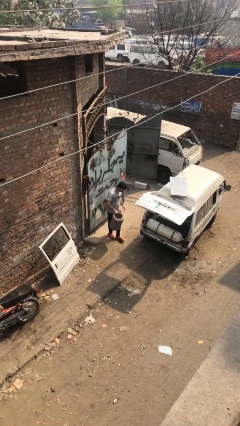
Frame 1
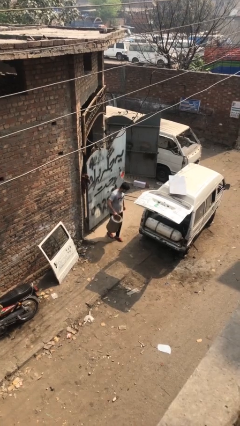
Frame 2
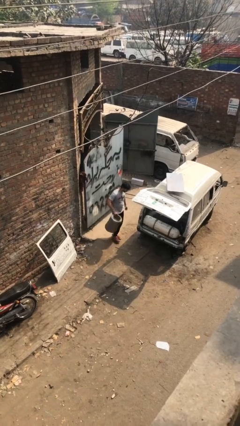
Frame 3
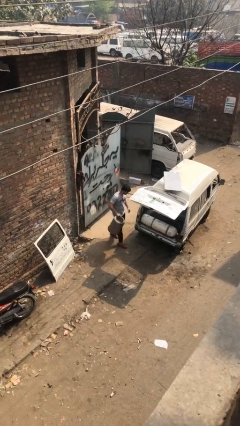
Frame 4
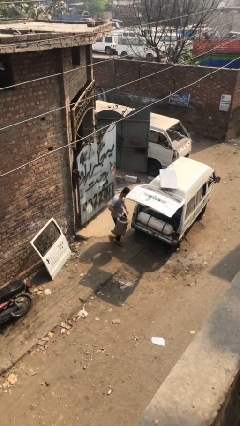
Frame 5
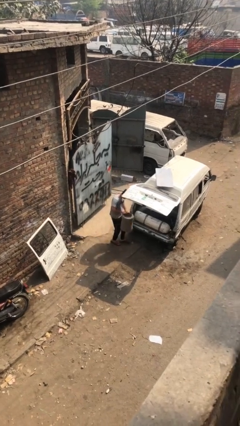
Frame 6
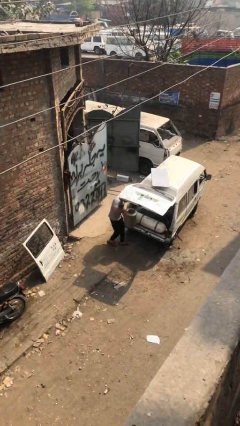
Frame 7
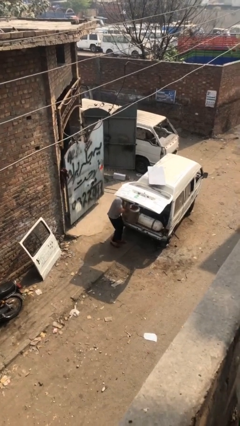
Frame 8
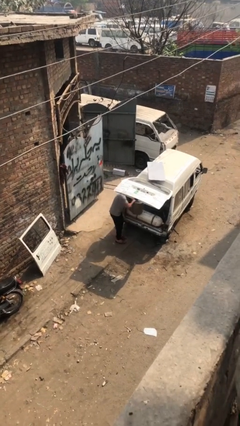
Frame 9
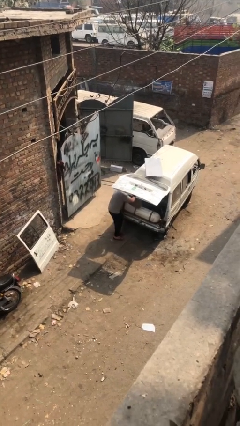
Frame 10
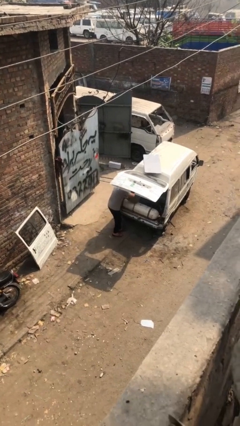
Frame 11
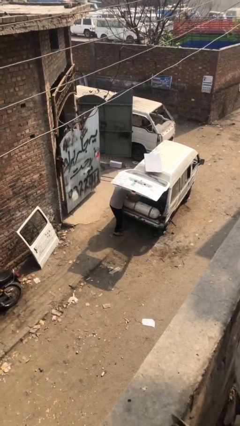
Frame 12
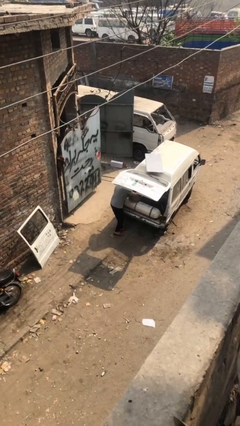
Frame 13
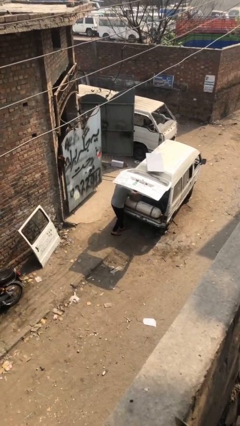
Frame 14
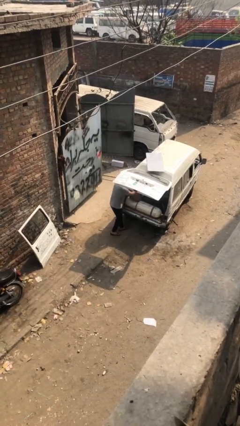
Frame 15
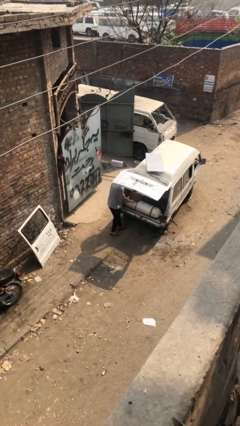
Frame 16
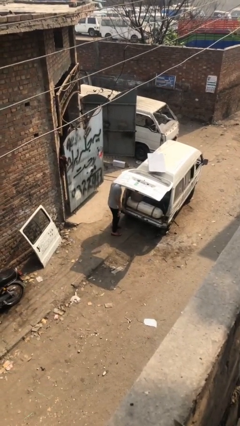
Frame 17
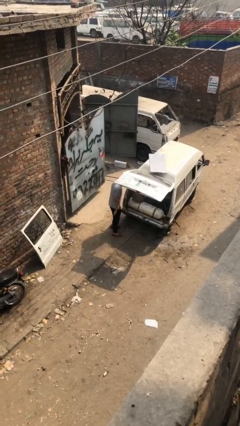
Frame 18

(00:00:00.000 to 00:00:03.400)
person loads car

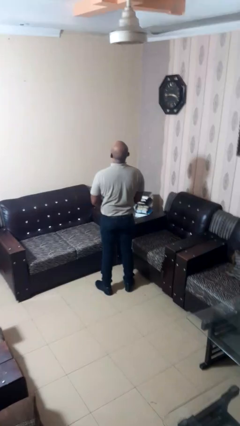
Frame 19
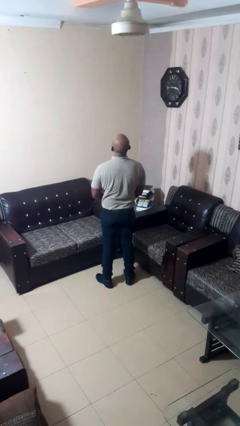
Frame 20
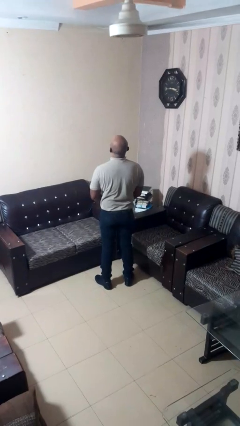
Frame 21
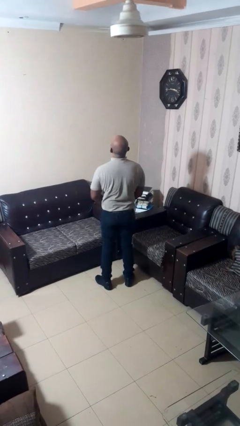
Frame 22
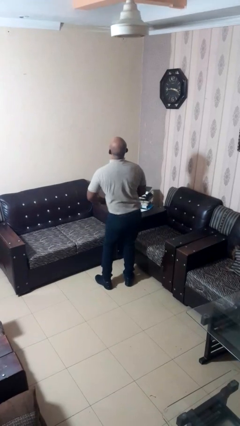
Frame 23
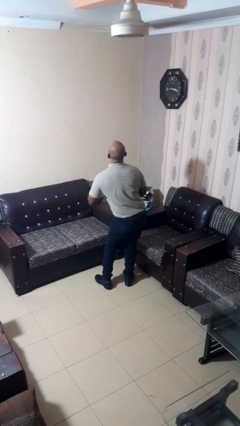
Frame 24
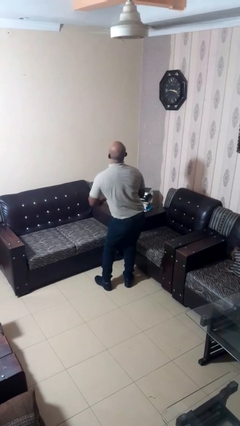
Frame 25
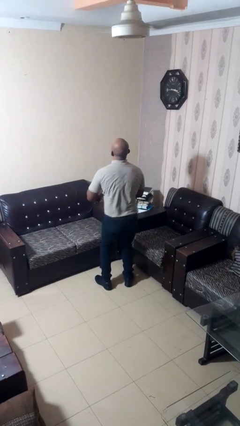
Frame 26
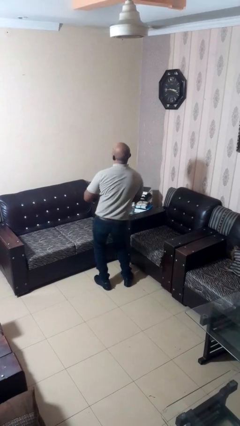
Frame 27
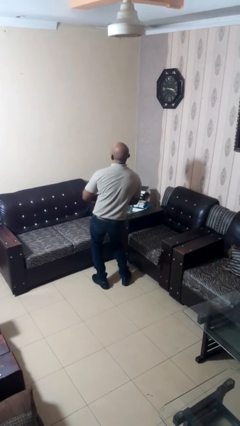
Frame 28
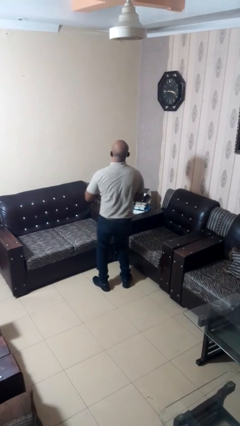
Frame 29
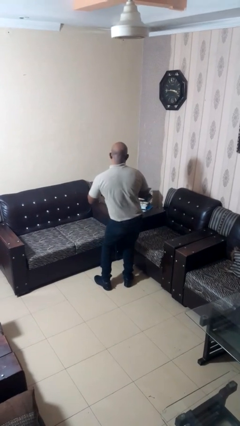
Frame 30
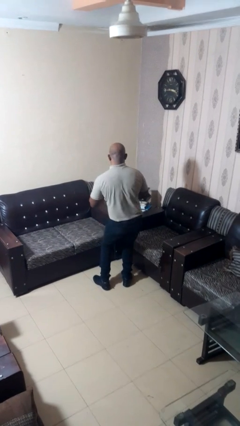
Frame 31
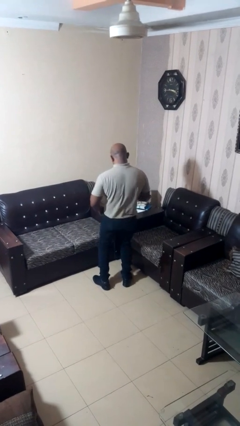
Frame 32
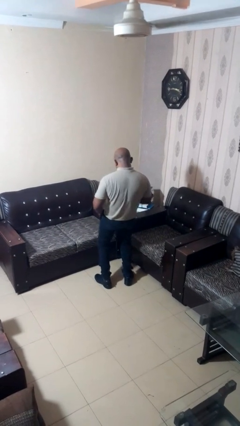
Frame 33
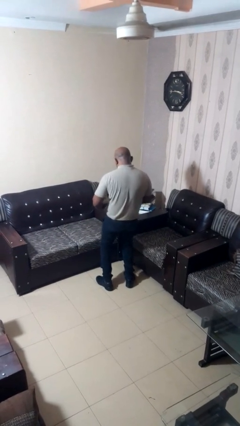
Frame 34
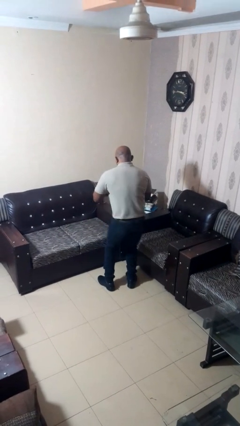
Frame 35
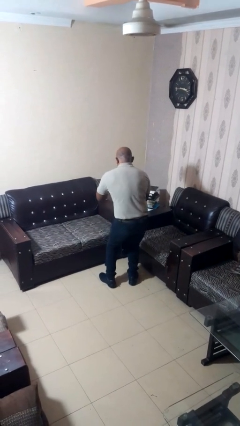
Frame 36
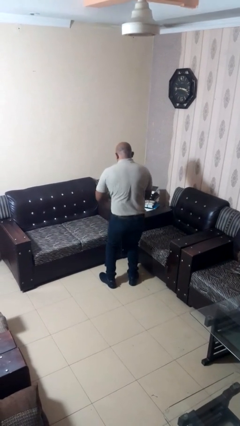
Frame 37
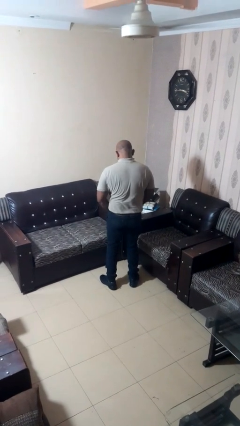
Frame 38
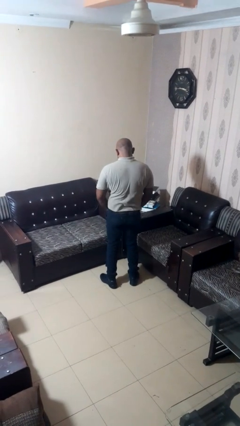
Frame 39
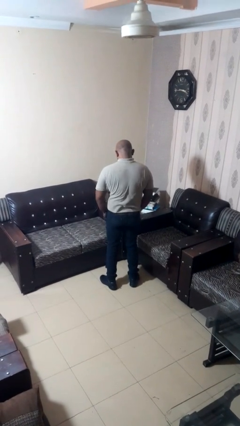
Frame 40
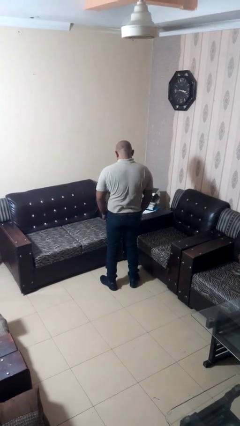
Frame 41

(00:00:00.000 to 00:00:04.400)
person wiggles hips

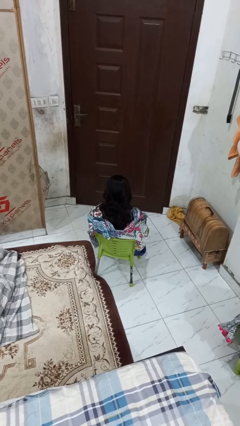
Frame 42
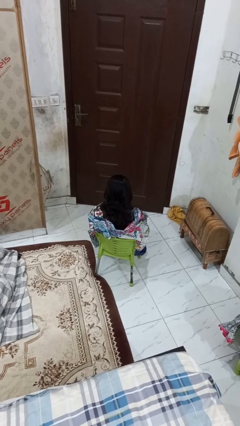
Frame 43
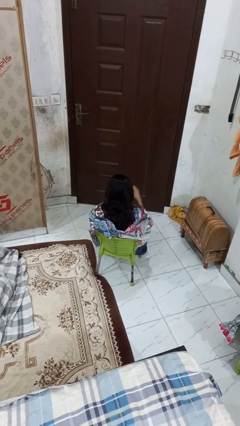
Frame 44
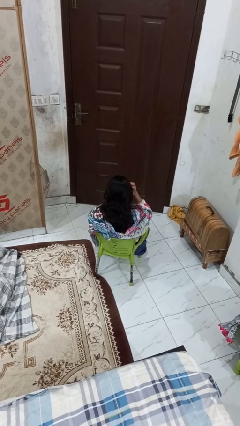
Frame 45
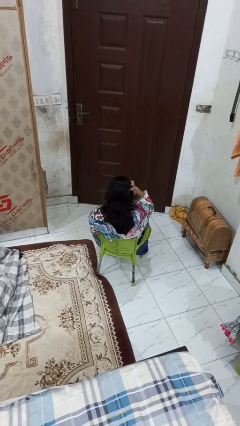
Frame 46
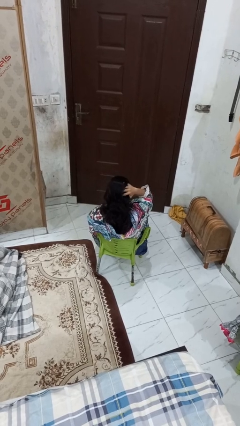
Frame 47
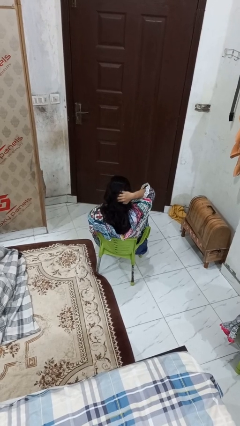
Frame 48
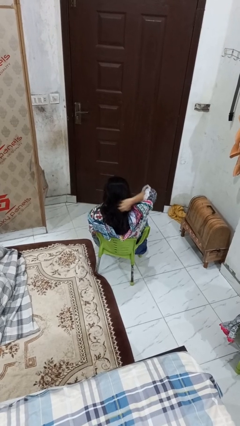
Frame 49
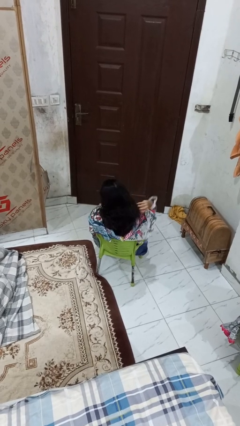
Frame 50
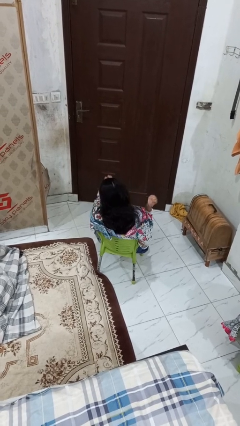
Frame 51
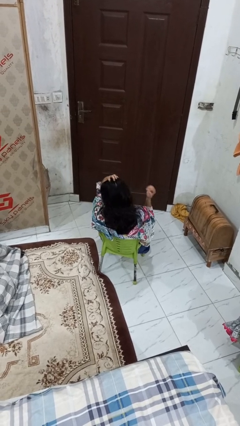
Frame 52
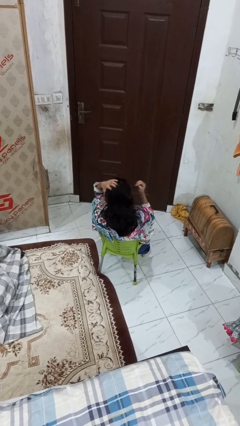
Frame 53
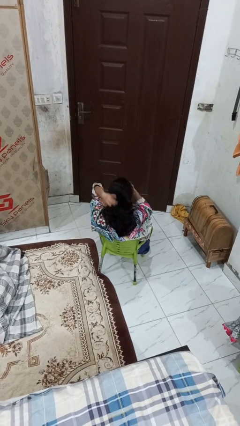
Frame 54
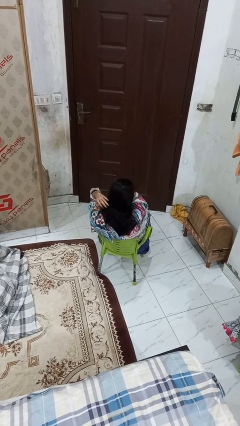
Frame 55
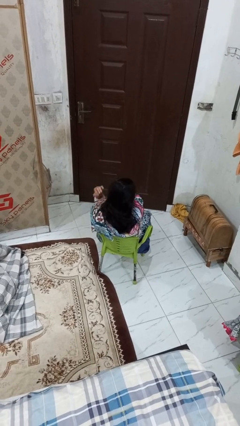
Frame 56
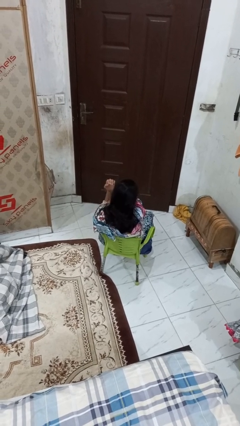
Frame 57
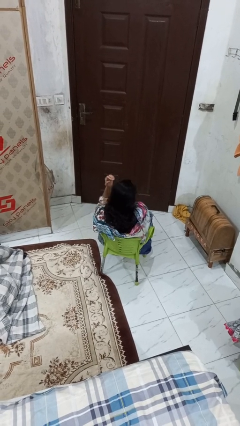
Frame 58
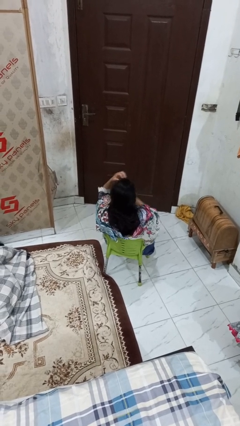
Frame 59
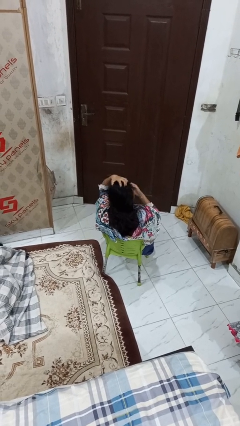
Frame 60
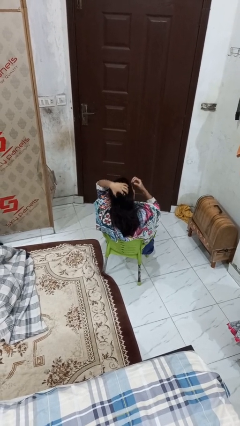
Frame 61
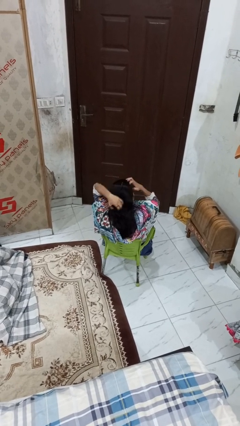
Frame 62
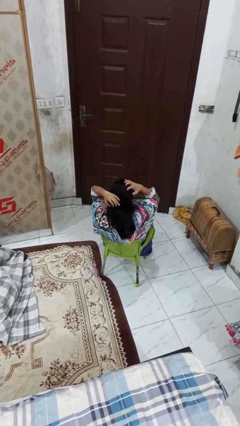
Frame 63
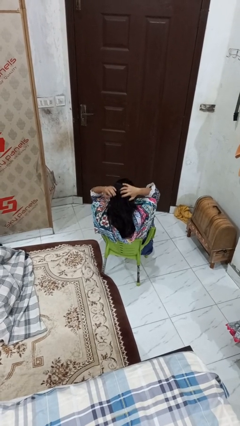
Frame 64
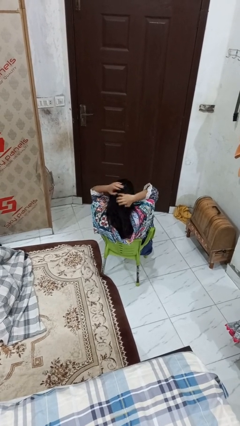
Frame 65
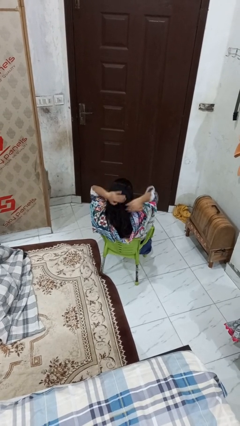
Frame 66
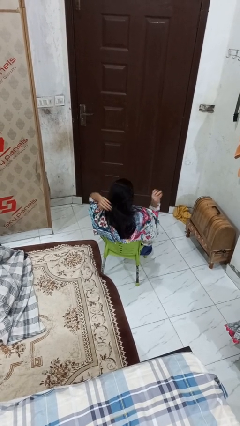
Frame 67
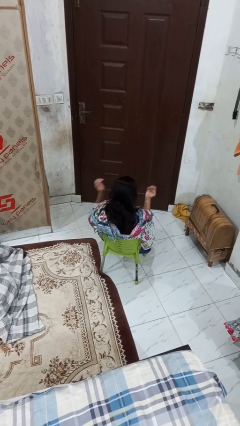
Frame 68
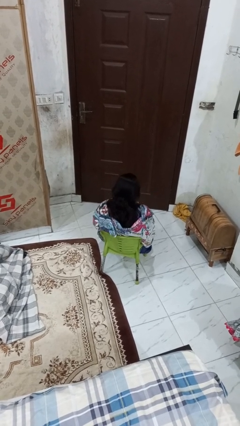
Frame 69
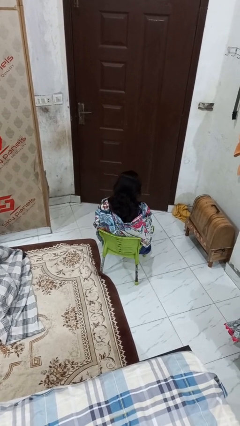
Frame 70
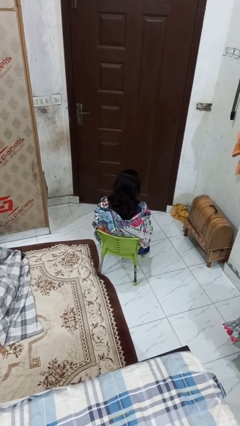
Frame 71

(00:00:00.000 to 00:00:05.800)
person strokes hair

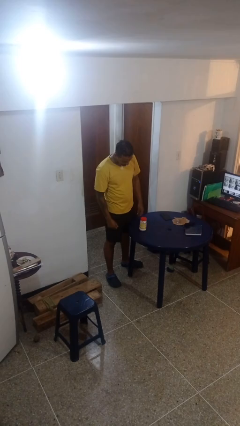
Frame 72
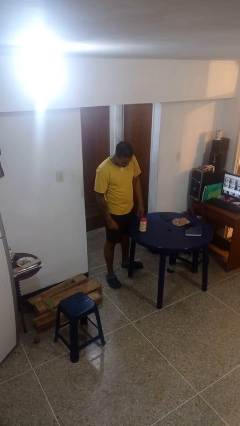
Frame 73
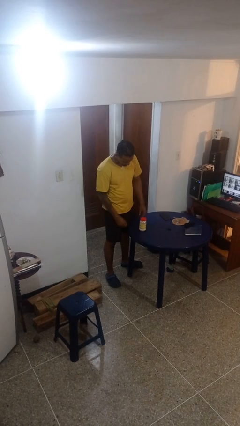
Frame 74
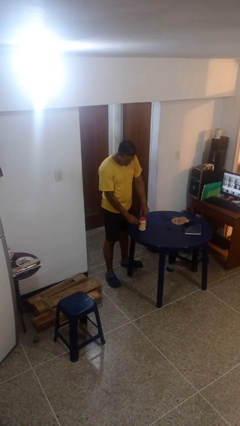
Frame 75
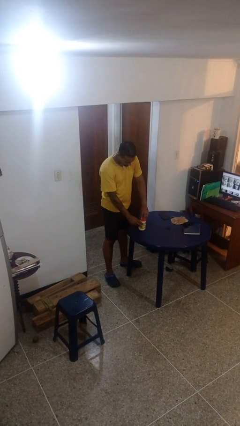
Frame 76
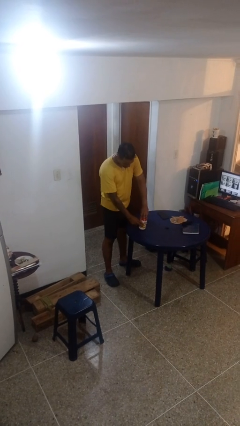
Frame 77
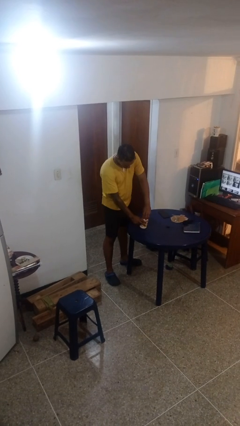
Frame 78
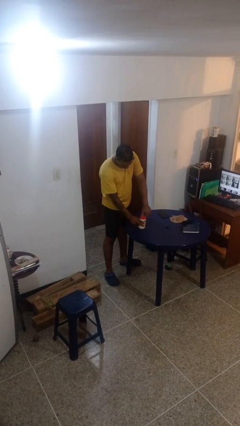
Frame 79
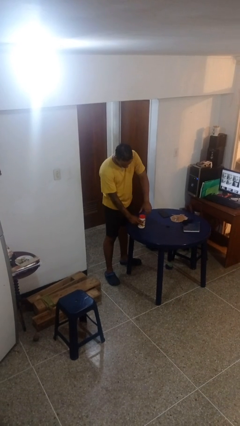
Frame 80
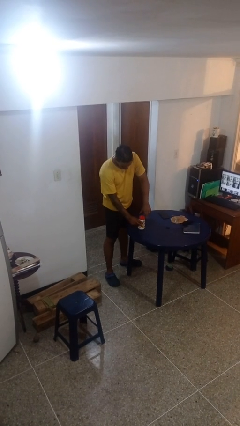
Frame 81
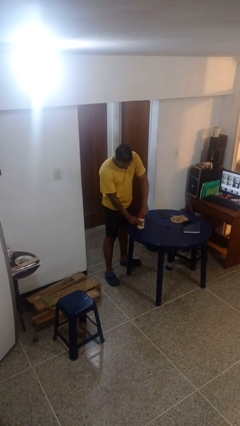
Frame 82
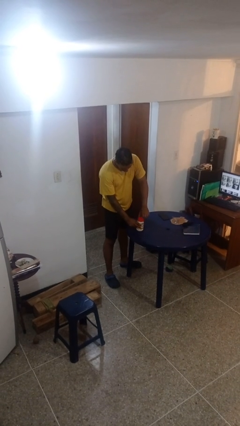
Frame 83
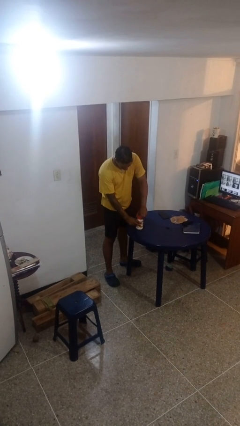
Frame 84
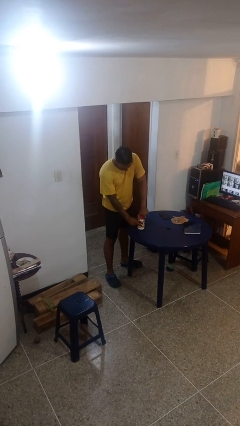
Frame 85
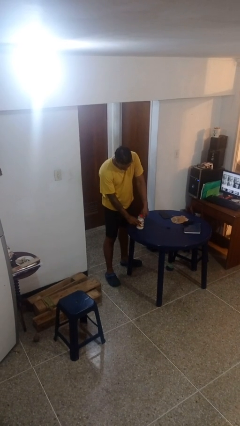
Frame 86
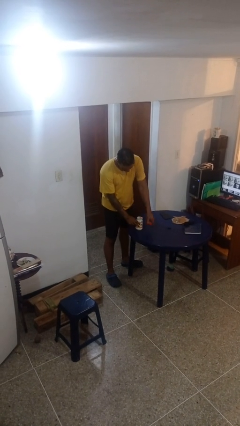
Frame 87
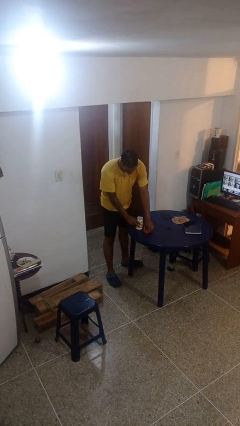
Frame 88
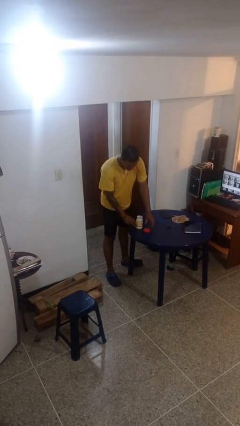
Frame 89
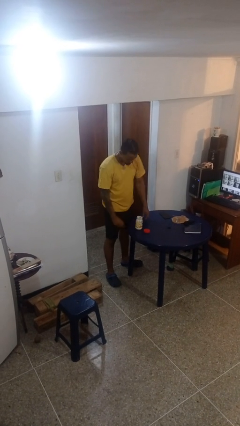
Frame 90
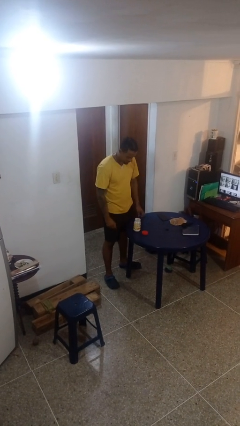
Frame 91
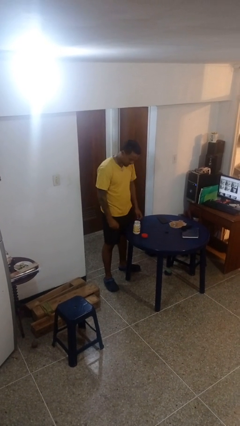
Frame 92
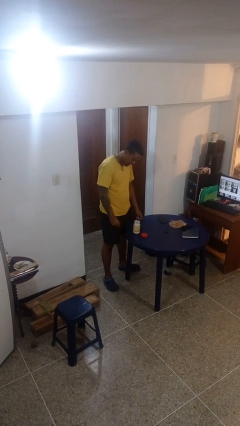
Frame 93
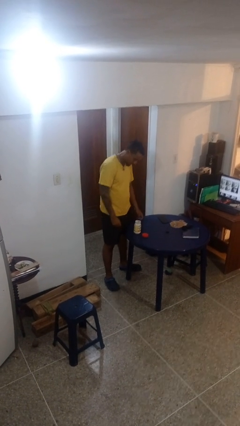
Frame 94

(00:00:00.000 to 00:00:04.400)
person opens jar

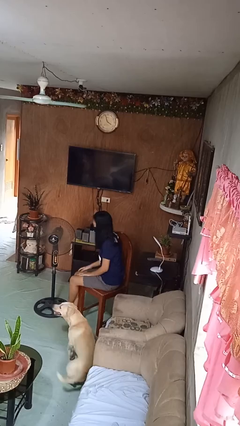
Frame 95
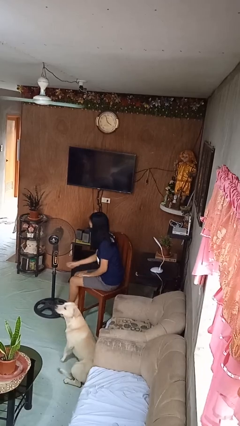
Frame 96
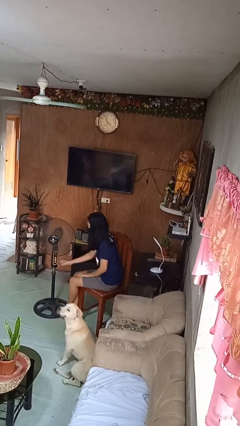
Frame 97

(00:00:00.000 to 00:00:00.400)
person turns off fan
